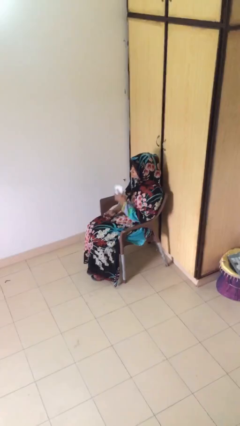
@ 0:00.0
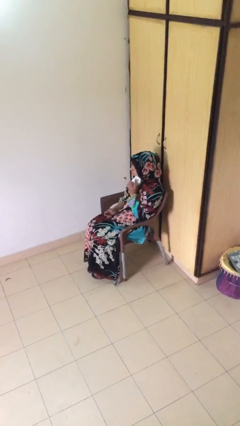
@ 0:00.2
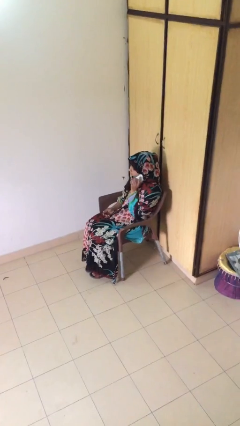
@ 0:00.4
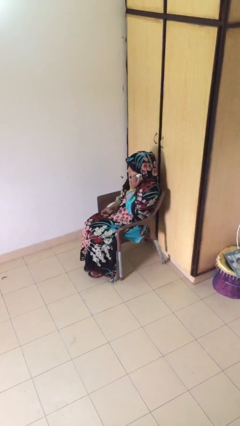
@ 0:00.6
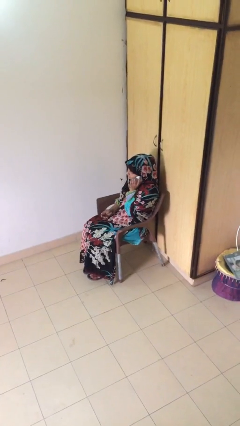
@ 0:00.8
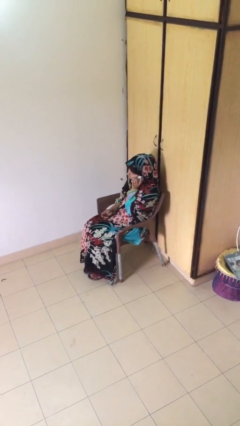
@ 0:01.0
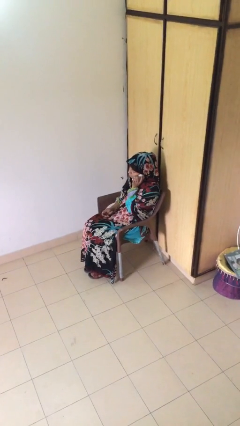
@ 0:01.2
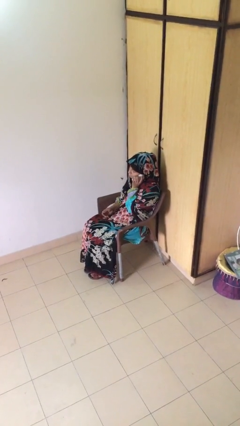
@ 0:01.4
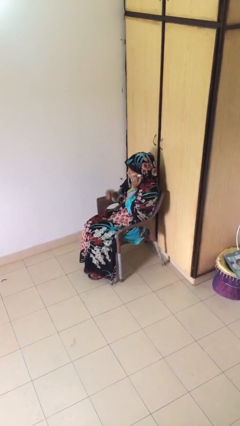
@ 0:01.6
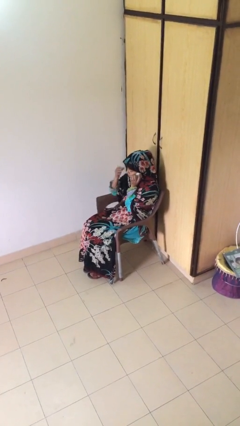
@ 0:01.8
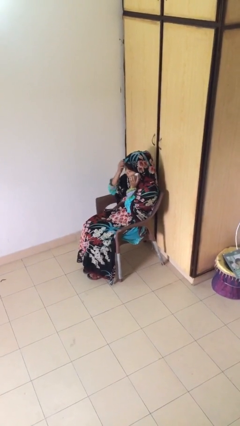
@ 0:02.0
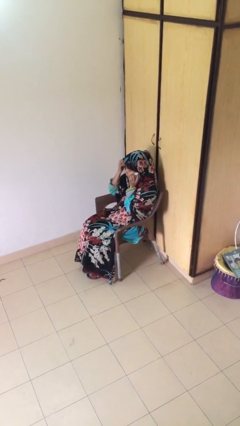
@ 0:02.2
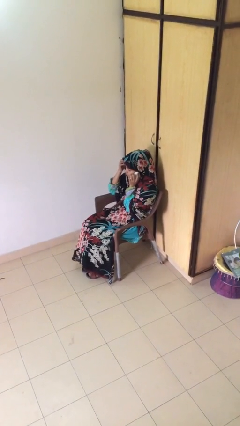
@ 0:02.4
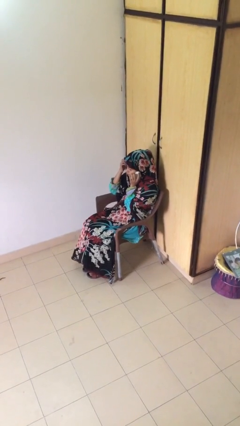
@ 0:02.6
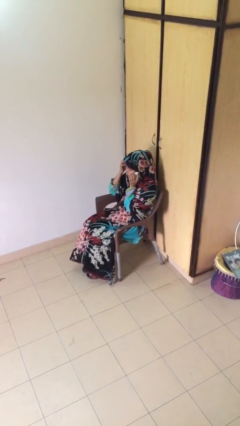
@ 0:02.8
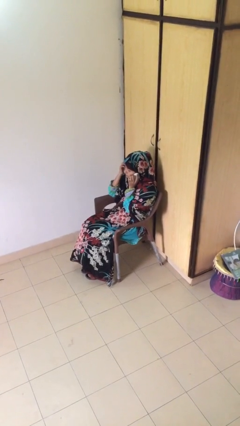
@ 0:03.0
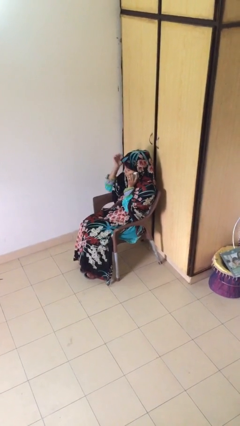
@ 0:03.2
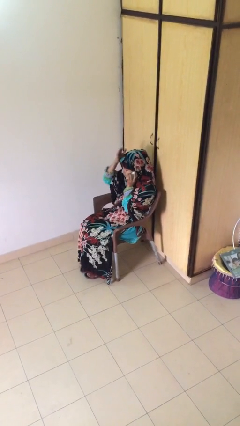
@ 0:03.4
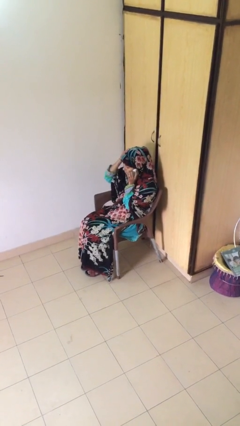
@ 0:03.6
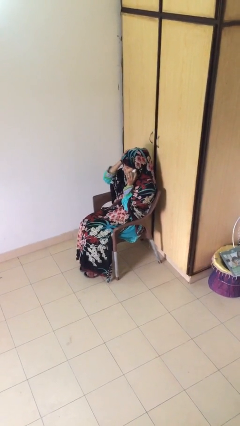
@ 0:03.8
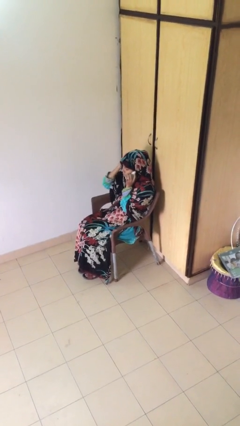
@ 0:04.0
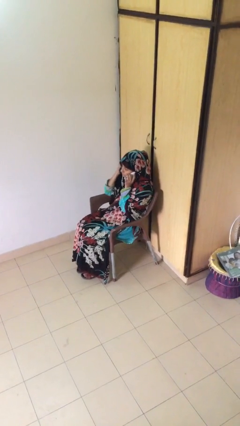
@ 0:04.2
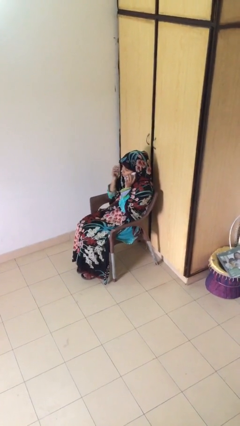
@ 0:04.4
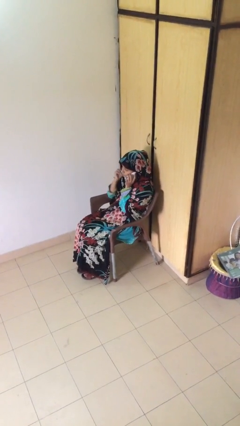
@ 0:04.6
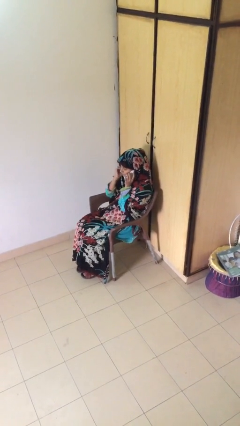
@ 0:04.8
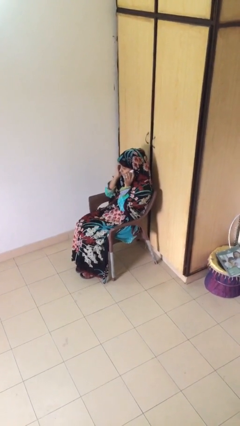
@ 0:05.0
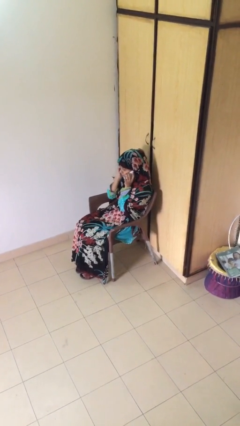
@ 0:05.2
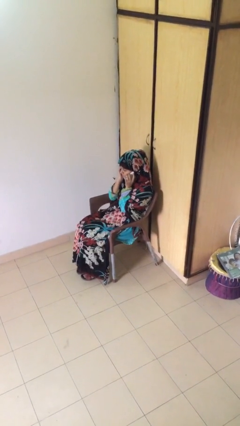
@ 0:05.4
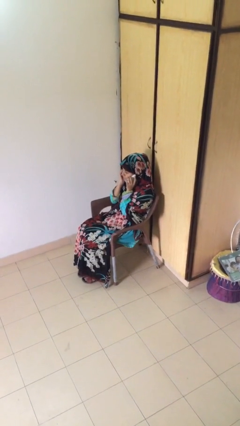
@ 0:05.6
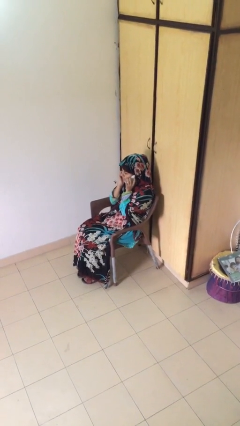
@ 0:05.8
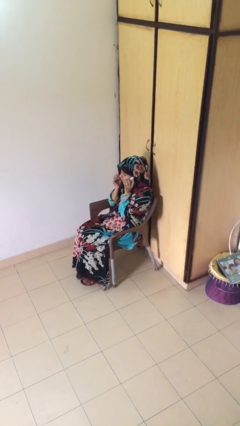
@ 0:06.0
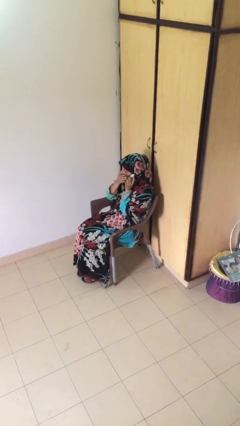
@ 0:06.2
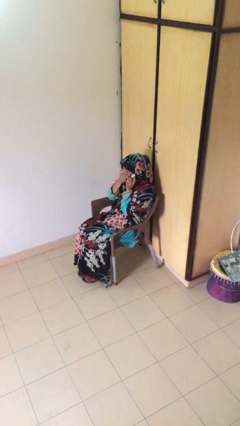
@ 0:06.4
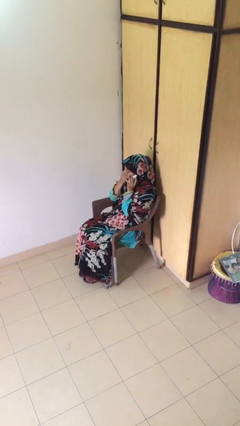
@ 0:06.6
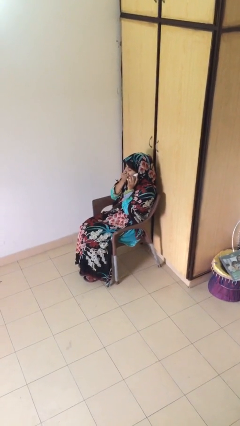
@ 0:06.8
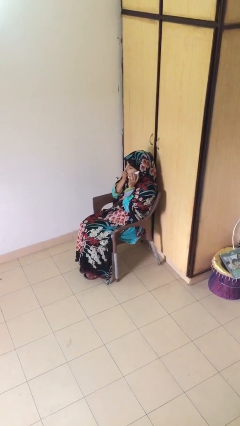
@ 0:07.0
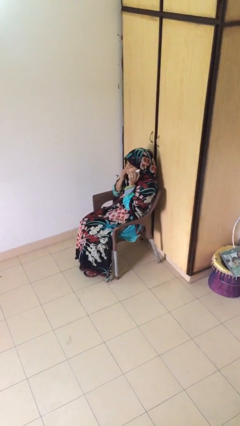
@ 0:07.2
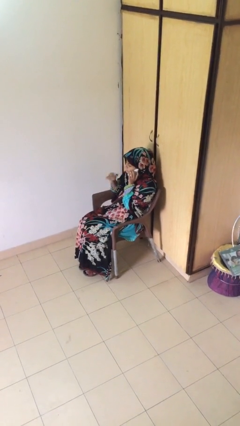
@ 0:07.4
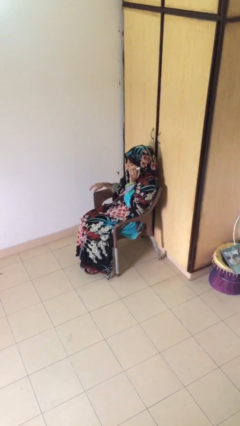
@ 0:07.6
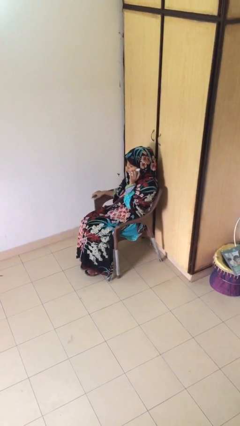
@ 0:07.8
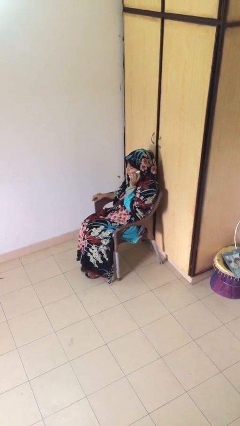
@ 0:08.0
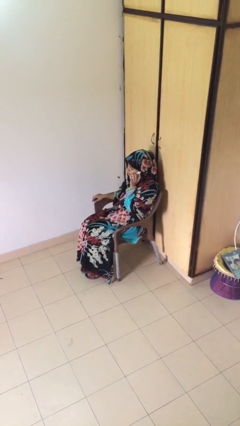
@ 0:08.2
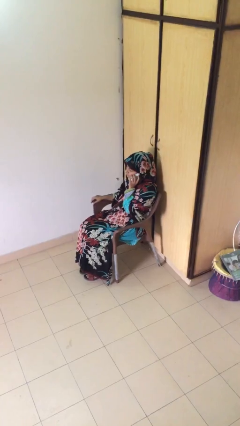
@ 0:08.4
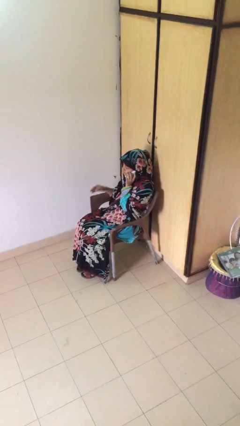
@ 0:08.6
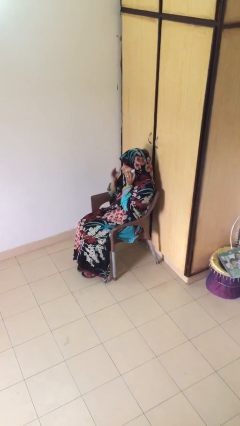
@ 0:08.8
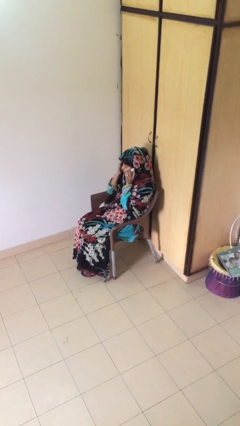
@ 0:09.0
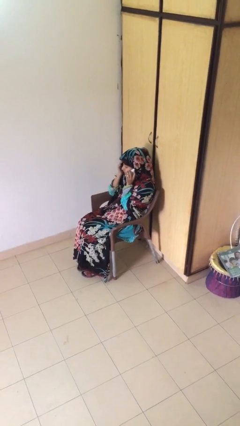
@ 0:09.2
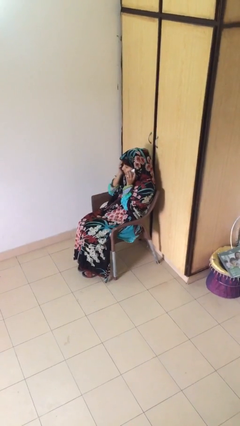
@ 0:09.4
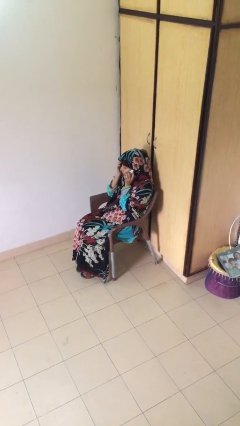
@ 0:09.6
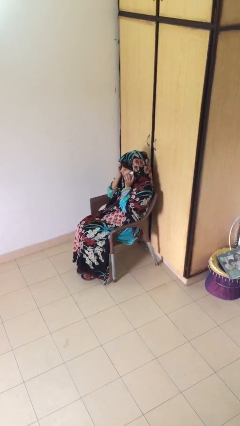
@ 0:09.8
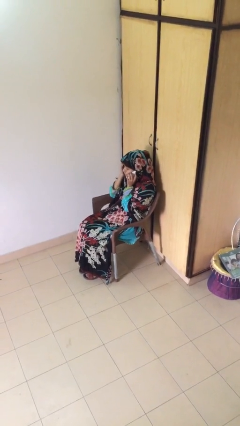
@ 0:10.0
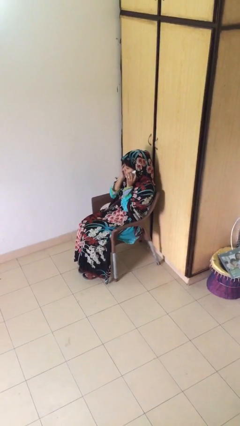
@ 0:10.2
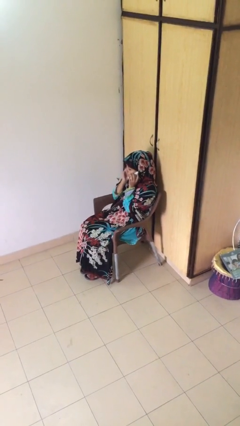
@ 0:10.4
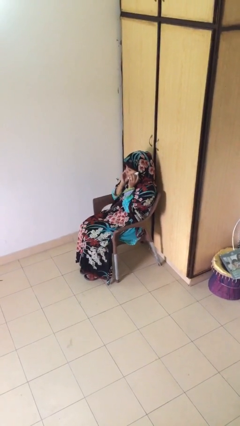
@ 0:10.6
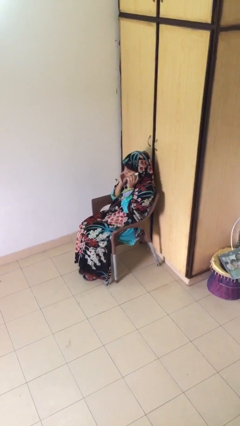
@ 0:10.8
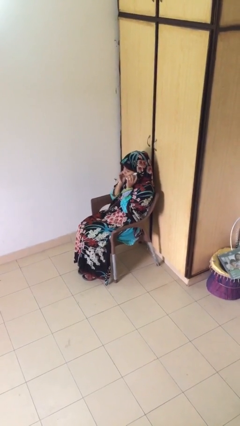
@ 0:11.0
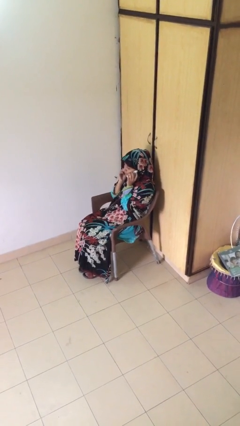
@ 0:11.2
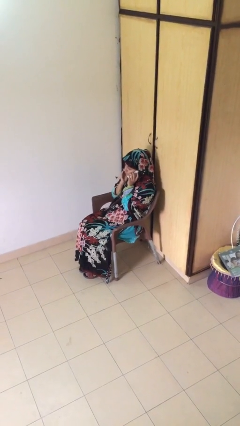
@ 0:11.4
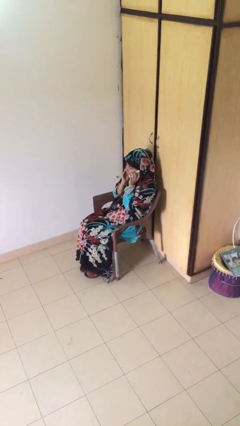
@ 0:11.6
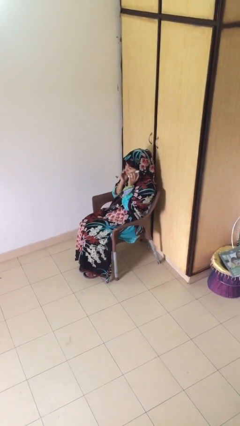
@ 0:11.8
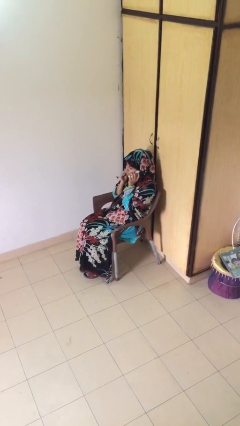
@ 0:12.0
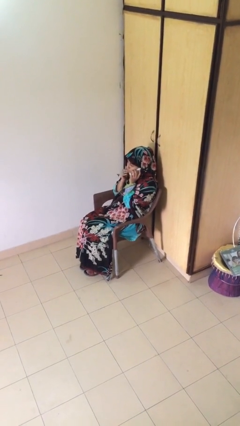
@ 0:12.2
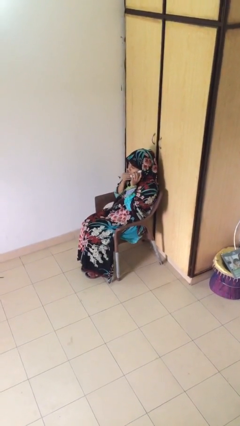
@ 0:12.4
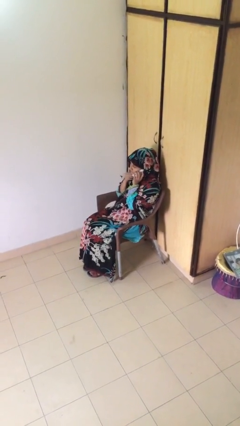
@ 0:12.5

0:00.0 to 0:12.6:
person talks on phone

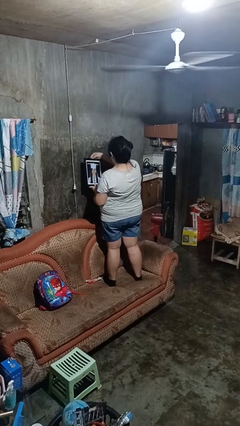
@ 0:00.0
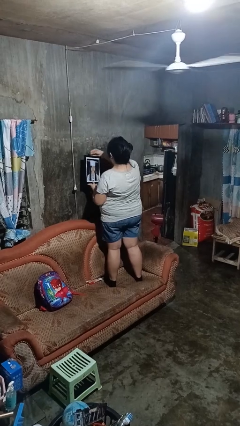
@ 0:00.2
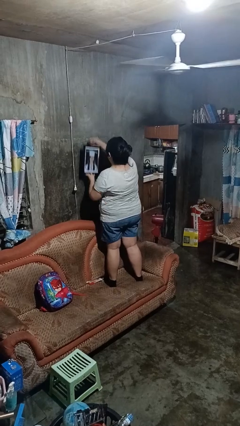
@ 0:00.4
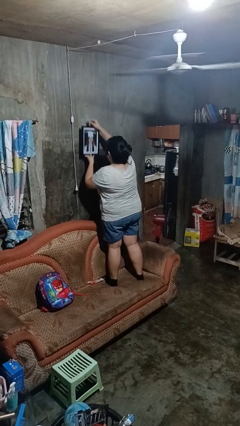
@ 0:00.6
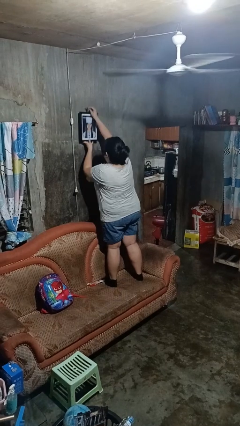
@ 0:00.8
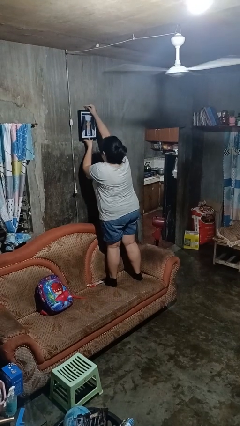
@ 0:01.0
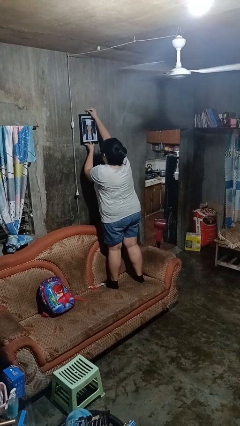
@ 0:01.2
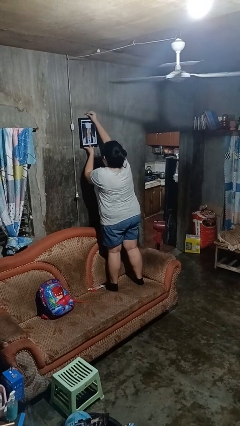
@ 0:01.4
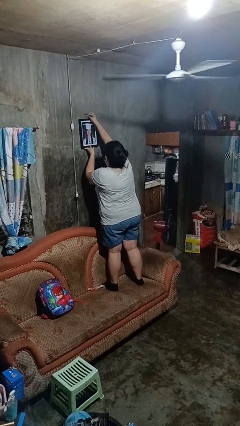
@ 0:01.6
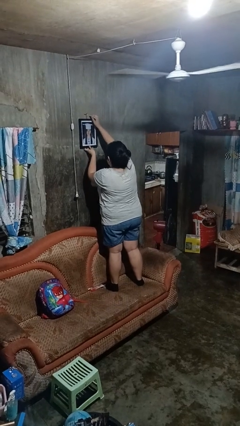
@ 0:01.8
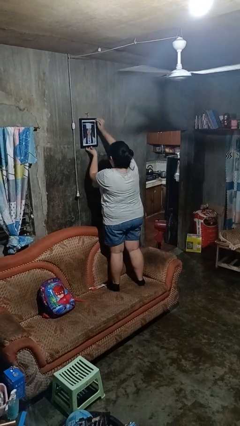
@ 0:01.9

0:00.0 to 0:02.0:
person puts up picture frame

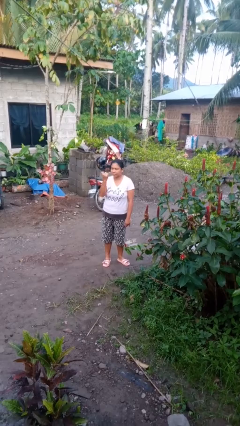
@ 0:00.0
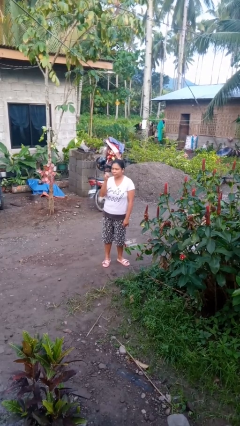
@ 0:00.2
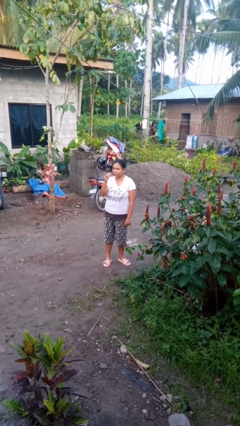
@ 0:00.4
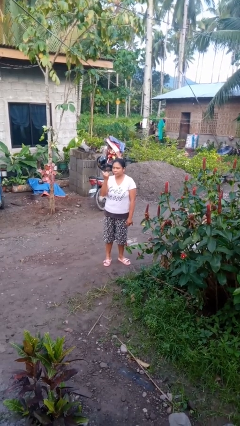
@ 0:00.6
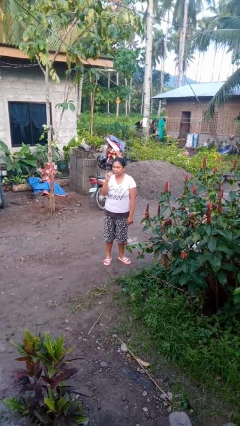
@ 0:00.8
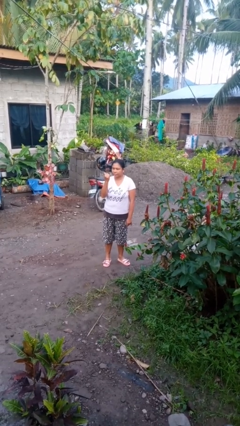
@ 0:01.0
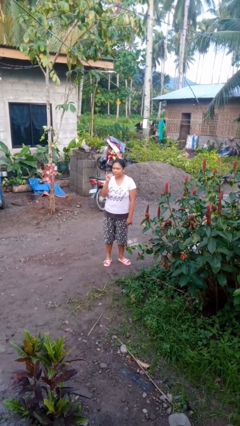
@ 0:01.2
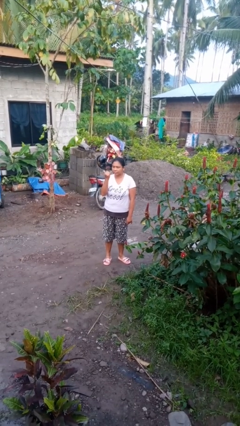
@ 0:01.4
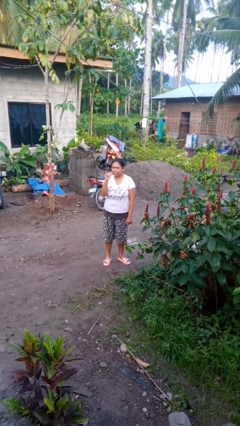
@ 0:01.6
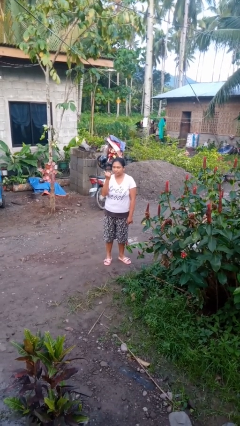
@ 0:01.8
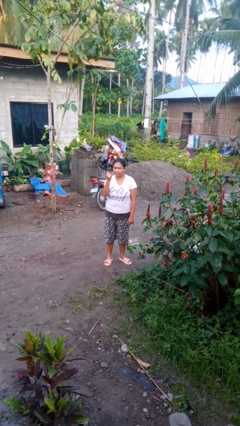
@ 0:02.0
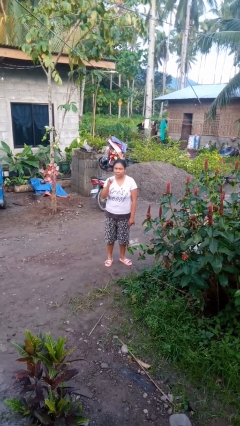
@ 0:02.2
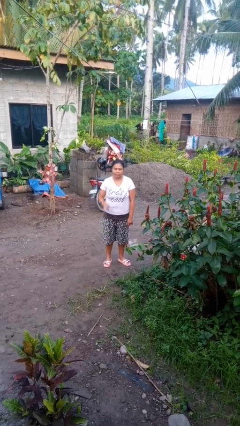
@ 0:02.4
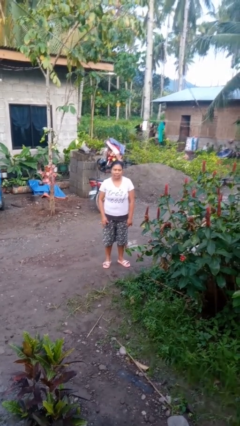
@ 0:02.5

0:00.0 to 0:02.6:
person gestures hang loose

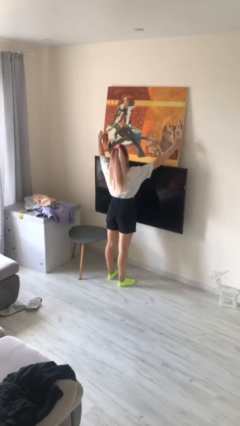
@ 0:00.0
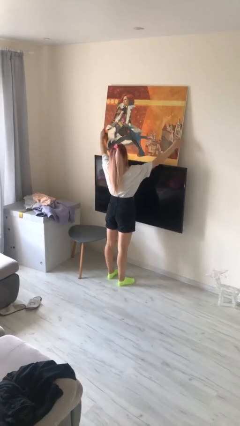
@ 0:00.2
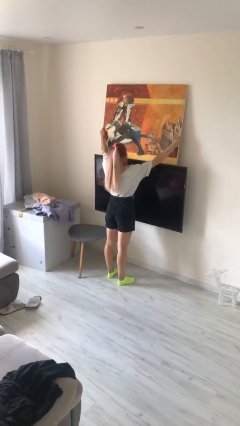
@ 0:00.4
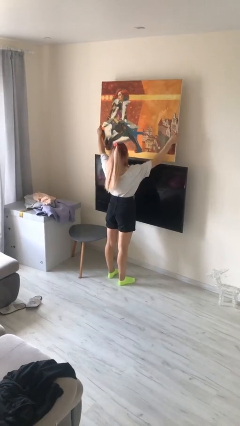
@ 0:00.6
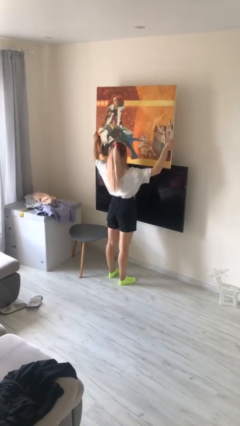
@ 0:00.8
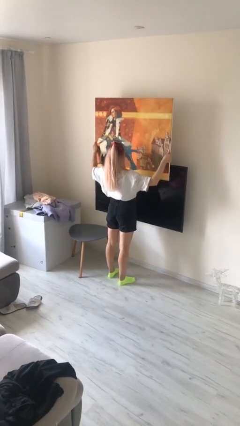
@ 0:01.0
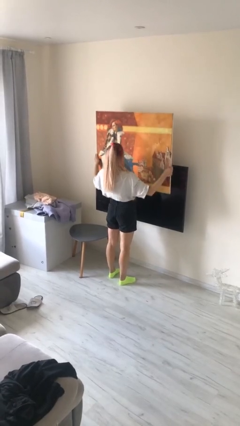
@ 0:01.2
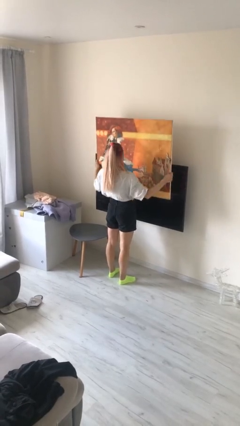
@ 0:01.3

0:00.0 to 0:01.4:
person takes down picture frame
